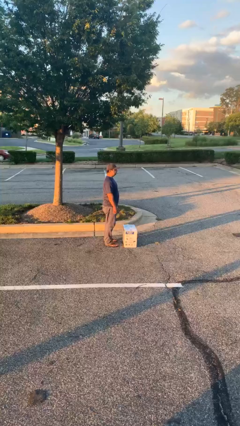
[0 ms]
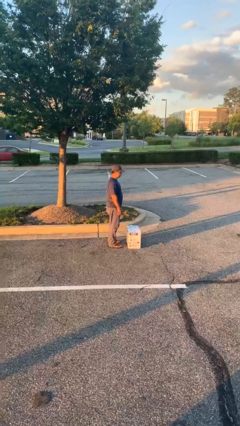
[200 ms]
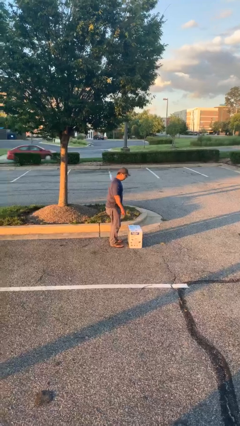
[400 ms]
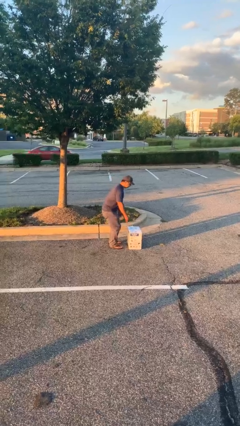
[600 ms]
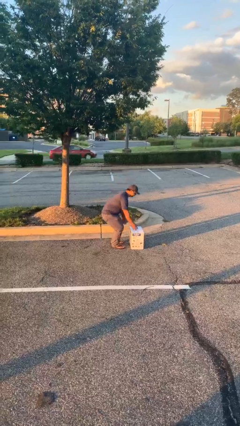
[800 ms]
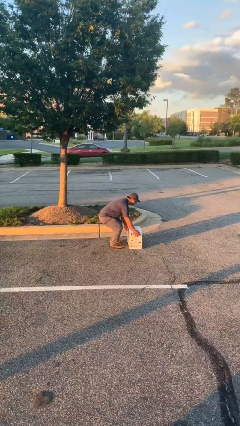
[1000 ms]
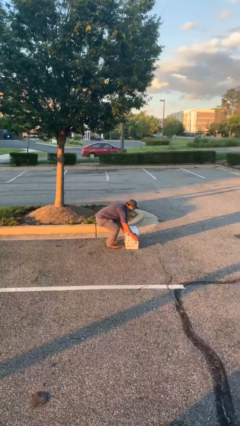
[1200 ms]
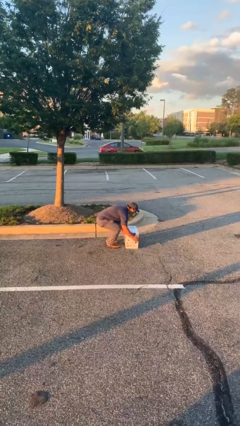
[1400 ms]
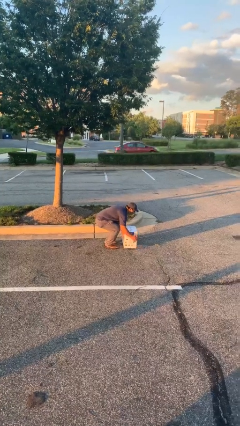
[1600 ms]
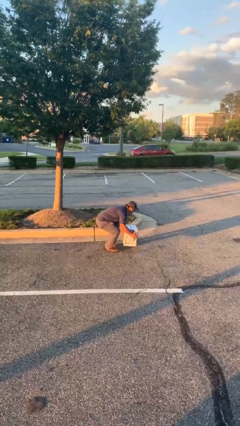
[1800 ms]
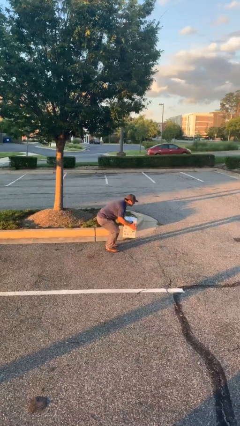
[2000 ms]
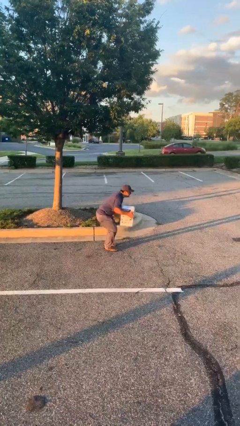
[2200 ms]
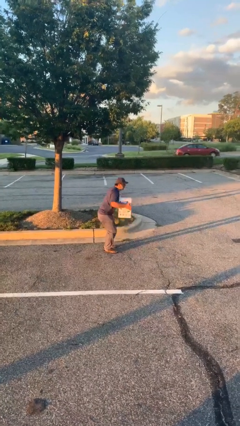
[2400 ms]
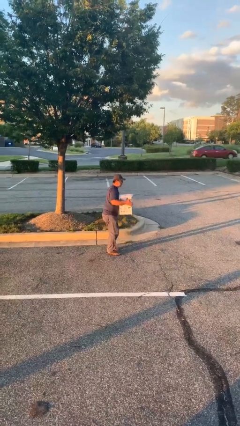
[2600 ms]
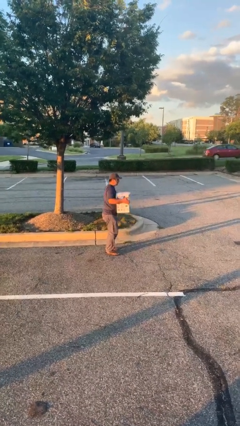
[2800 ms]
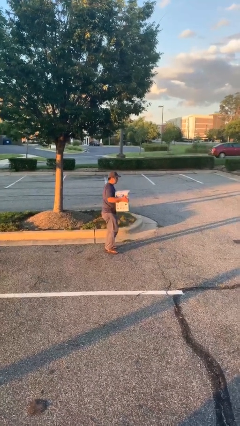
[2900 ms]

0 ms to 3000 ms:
person picks up object from floor

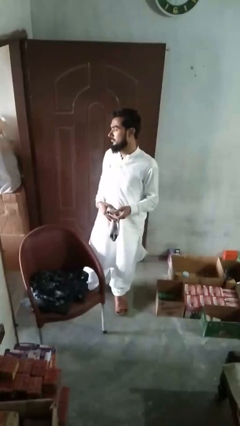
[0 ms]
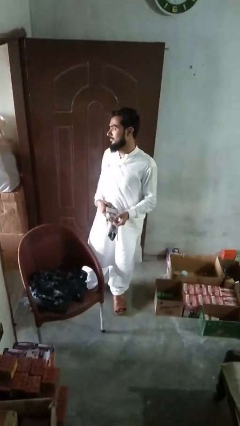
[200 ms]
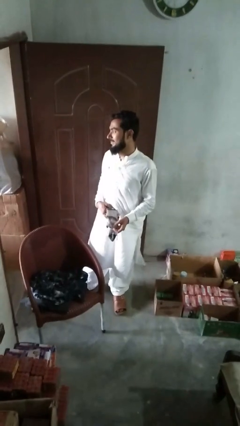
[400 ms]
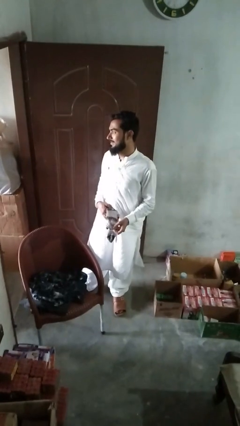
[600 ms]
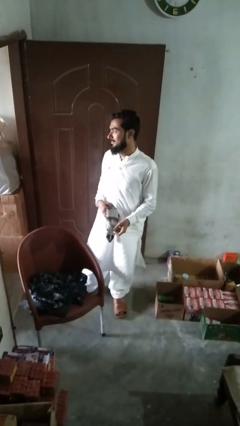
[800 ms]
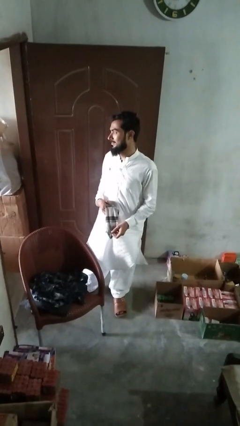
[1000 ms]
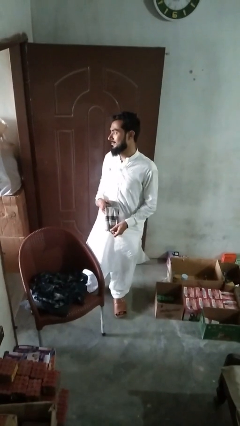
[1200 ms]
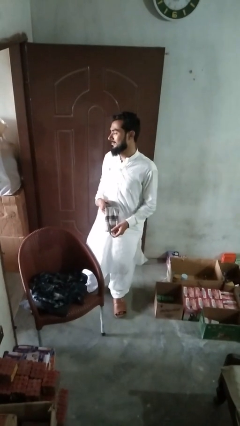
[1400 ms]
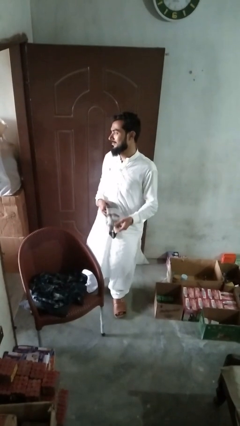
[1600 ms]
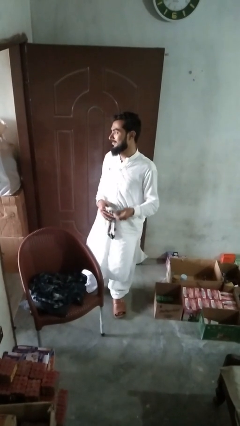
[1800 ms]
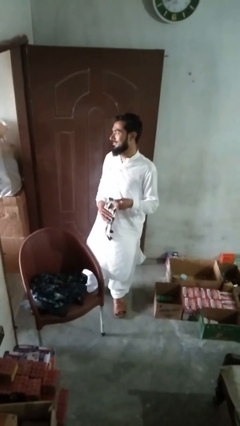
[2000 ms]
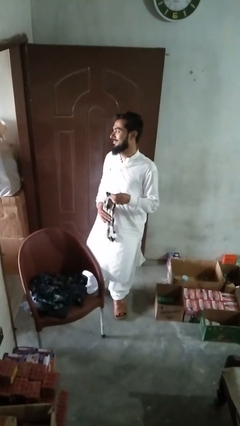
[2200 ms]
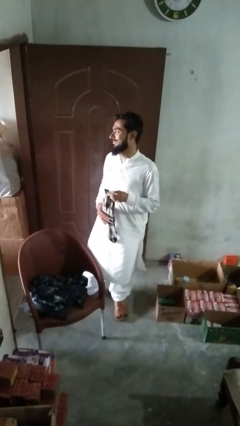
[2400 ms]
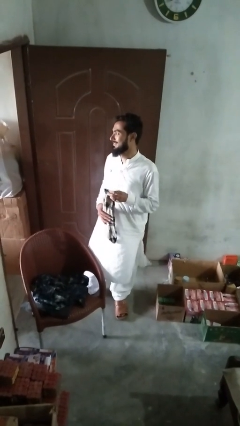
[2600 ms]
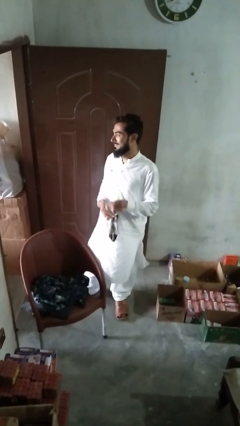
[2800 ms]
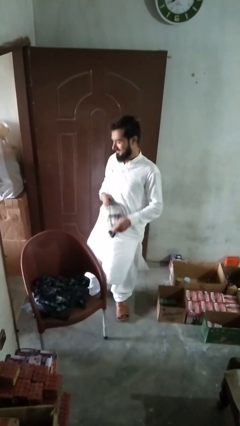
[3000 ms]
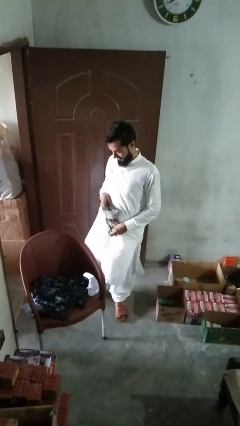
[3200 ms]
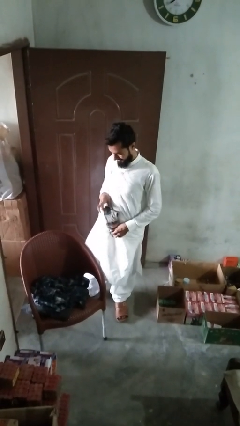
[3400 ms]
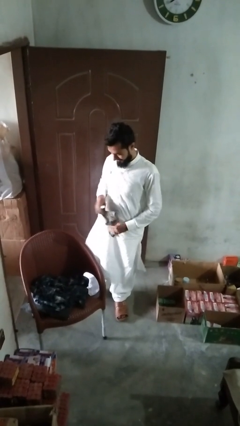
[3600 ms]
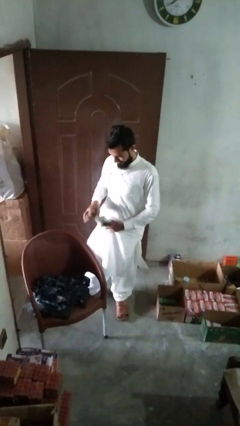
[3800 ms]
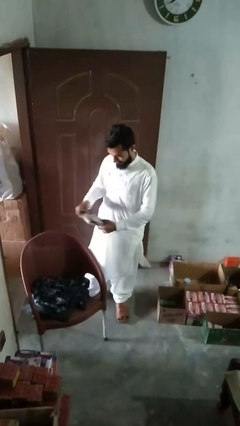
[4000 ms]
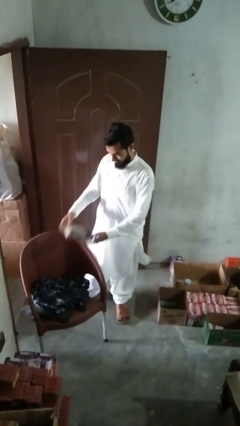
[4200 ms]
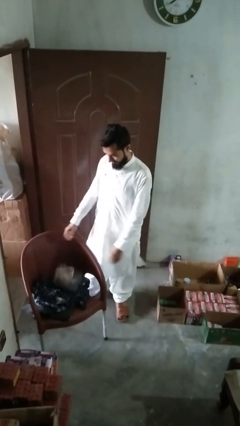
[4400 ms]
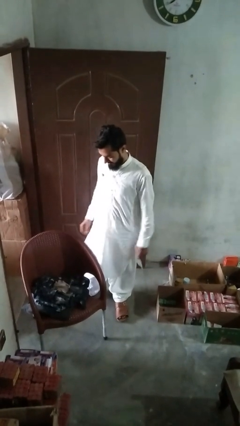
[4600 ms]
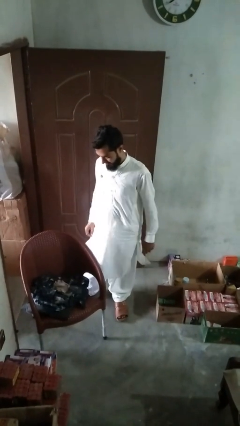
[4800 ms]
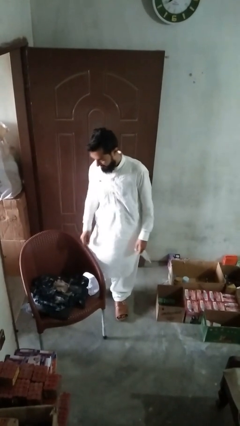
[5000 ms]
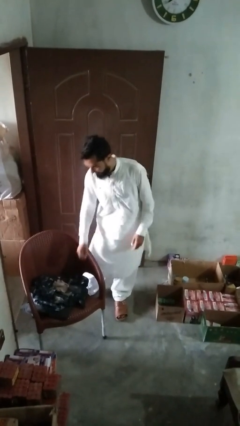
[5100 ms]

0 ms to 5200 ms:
person folds socks

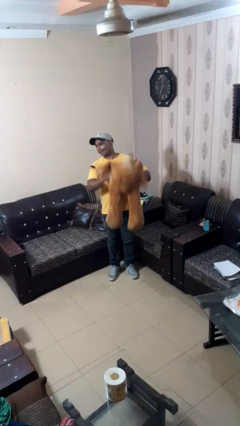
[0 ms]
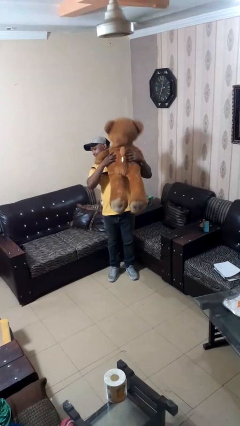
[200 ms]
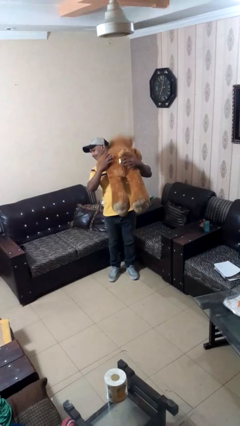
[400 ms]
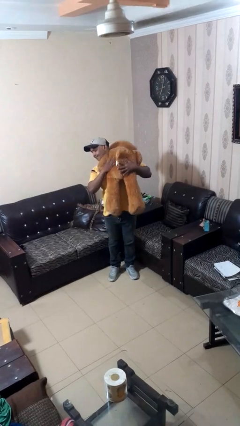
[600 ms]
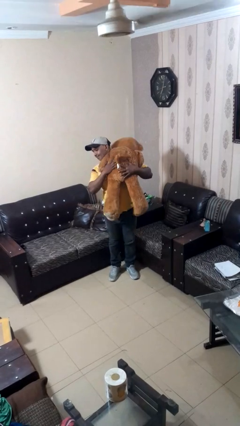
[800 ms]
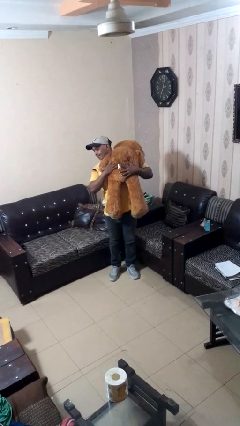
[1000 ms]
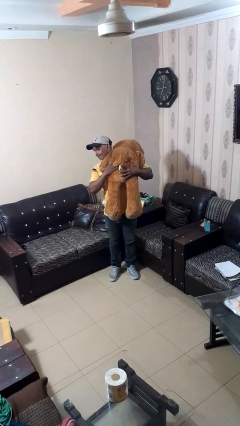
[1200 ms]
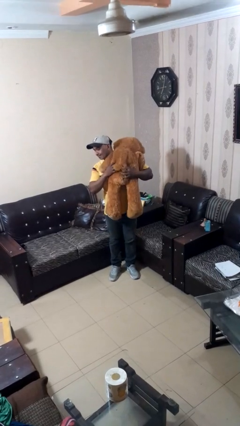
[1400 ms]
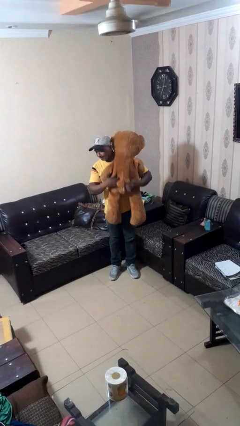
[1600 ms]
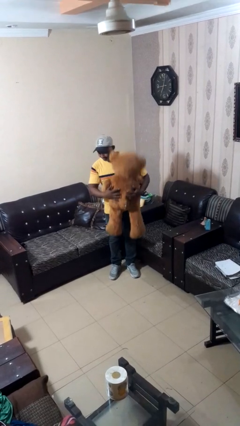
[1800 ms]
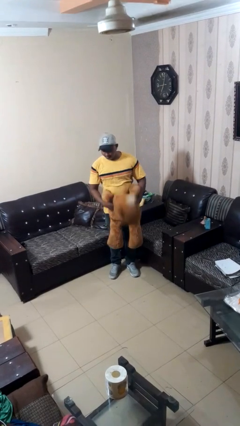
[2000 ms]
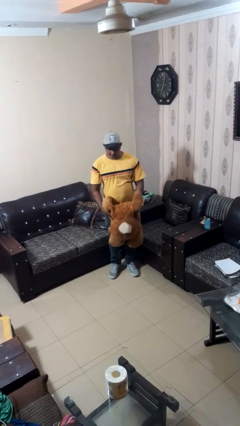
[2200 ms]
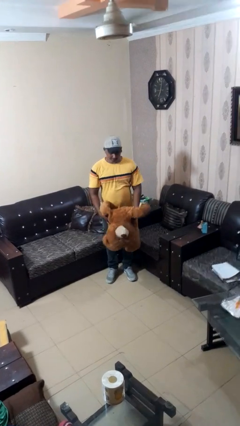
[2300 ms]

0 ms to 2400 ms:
person hugs stuffed animal

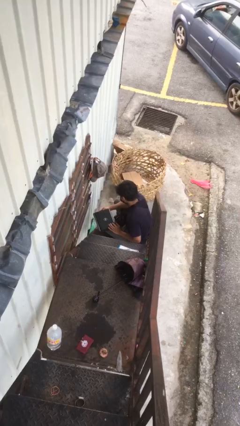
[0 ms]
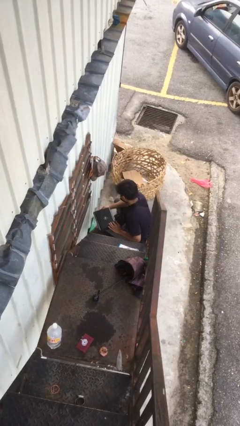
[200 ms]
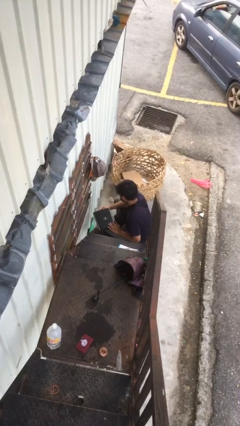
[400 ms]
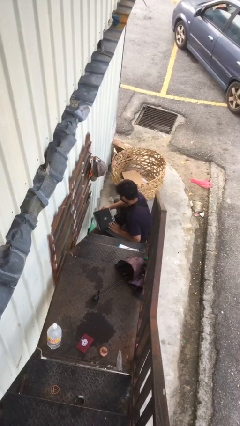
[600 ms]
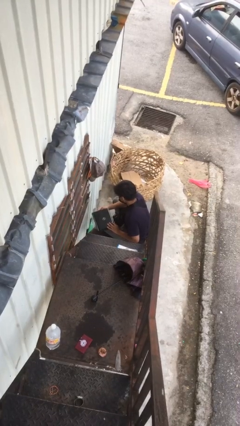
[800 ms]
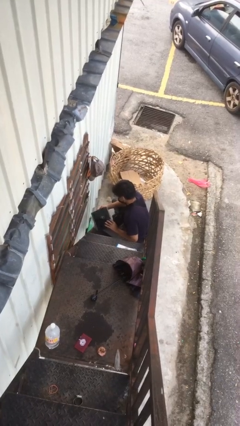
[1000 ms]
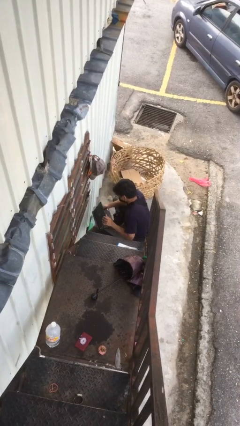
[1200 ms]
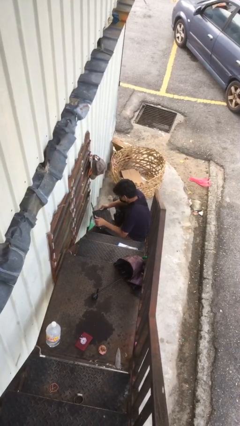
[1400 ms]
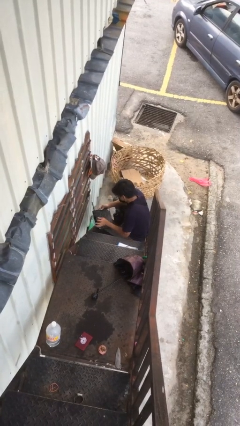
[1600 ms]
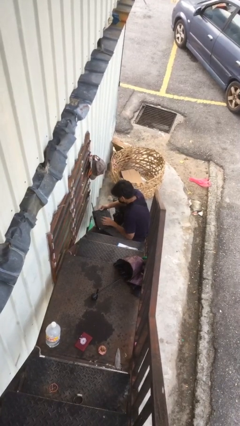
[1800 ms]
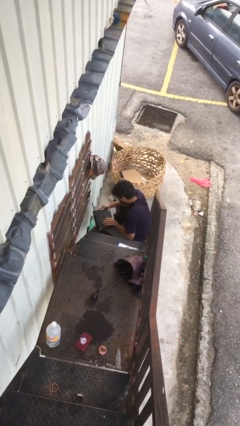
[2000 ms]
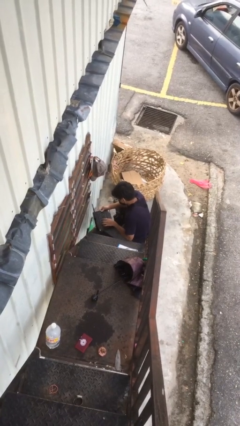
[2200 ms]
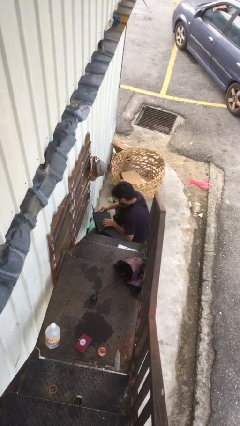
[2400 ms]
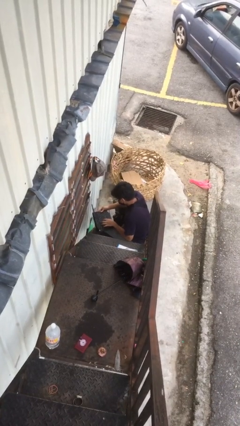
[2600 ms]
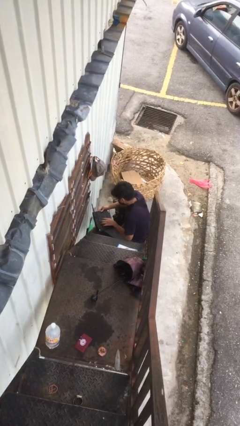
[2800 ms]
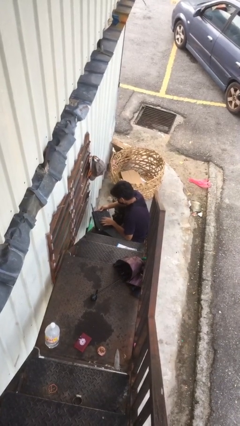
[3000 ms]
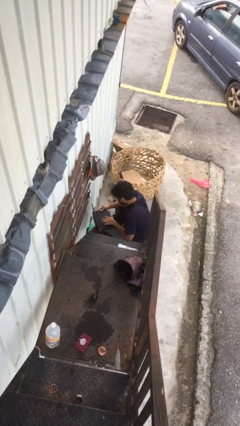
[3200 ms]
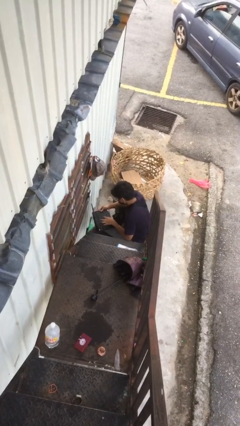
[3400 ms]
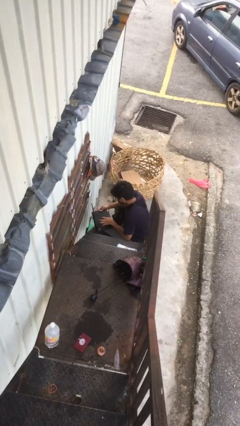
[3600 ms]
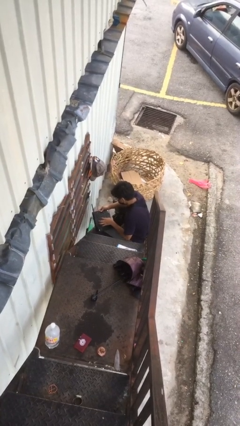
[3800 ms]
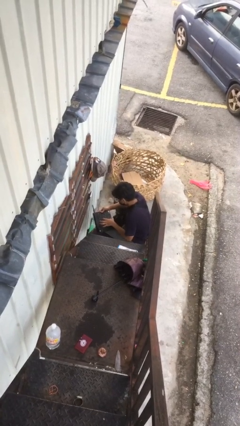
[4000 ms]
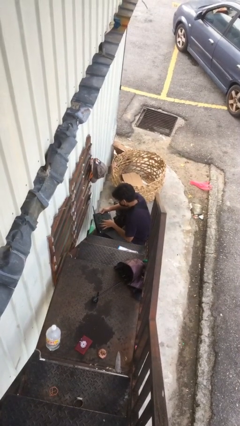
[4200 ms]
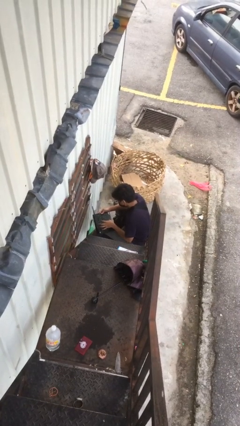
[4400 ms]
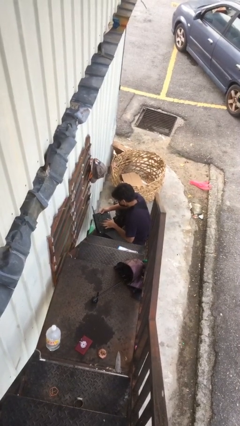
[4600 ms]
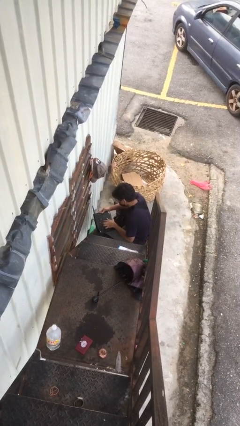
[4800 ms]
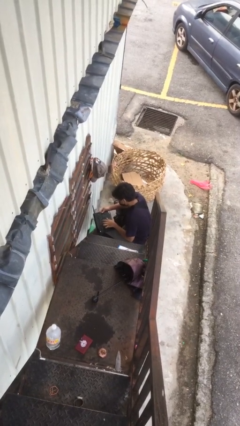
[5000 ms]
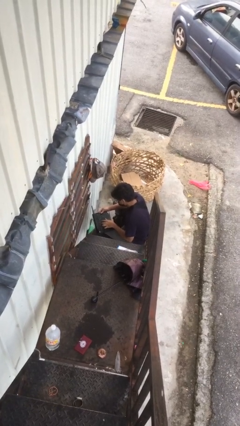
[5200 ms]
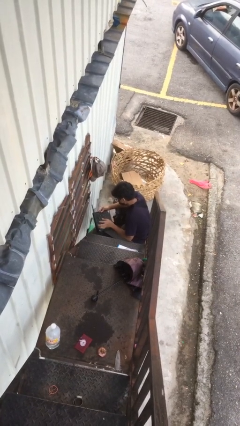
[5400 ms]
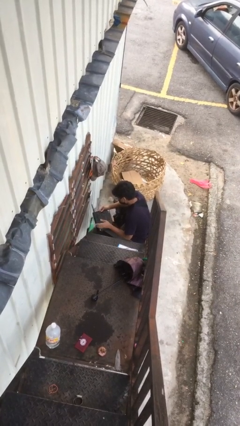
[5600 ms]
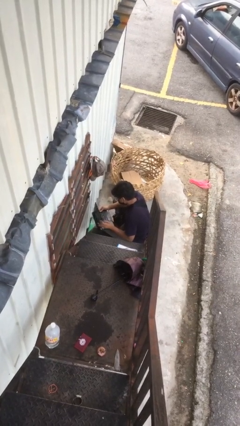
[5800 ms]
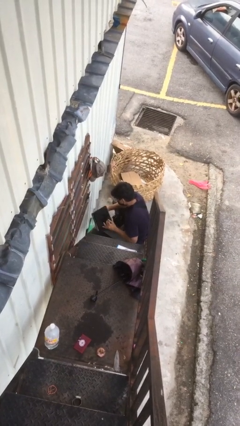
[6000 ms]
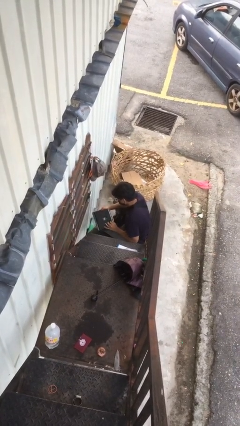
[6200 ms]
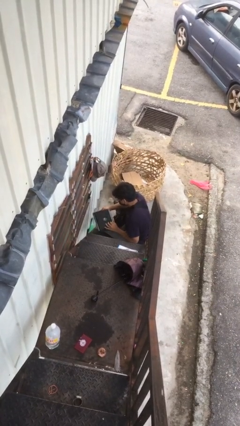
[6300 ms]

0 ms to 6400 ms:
person interacts with laptop

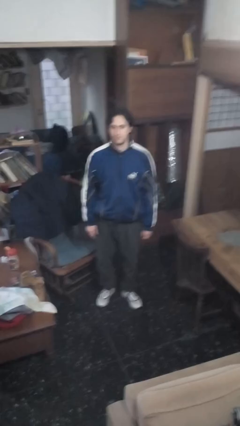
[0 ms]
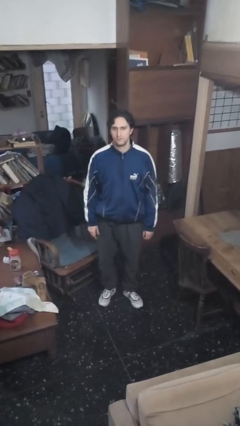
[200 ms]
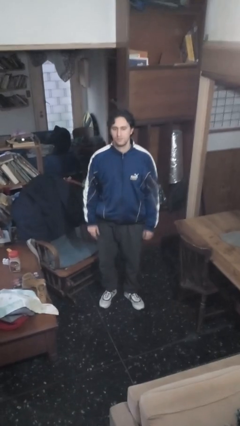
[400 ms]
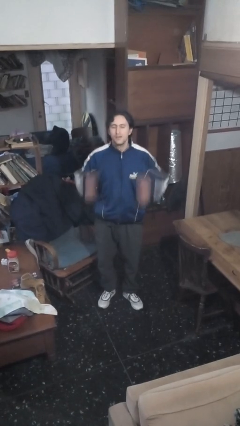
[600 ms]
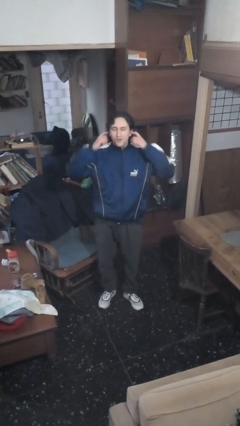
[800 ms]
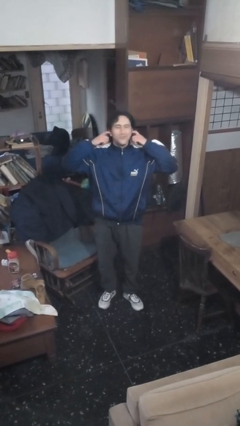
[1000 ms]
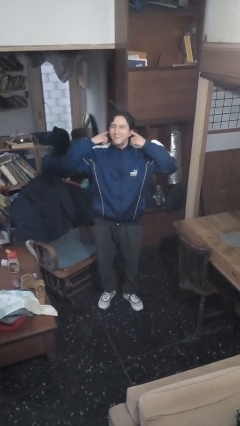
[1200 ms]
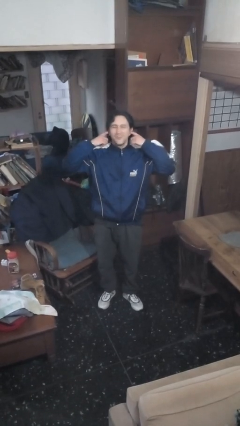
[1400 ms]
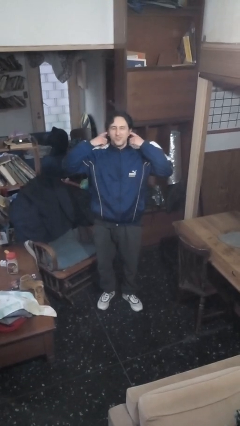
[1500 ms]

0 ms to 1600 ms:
person puts fingers in ear
